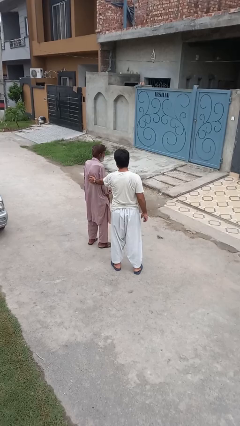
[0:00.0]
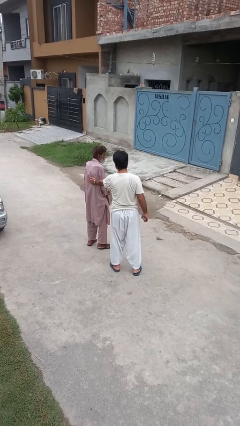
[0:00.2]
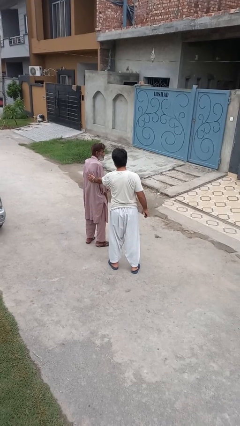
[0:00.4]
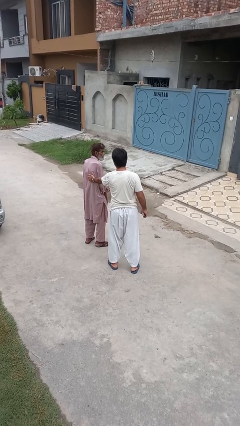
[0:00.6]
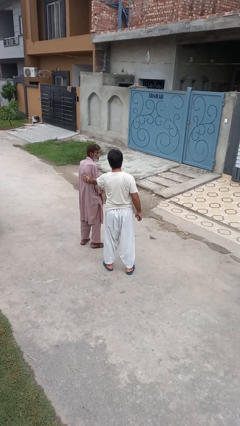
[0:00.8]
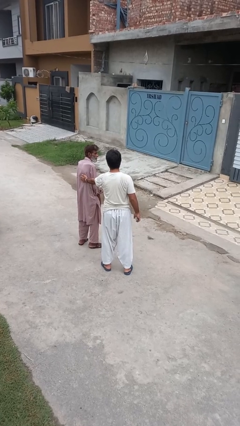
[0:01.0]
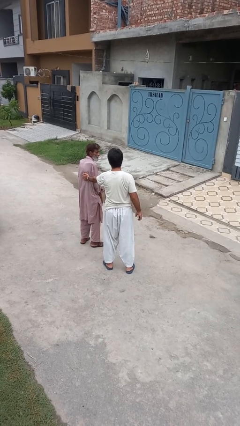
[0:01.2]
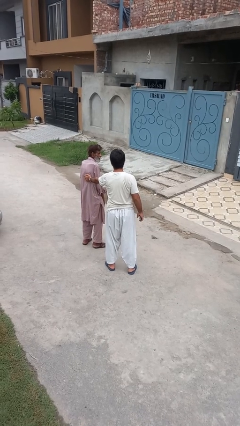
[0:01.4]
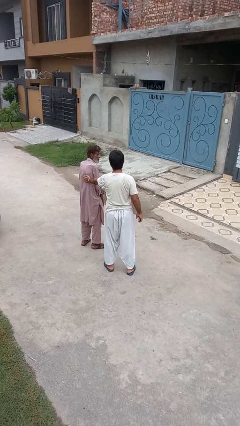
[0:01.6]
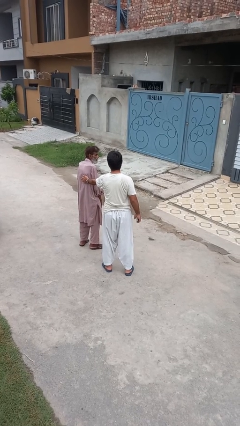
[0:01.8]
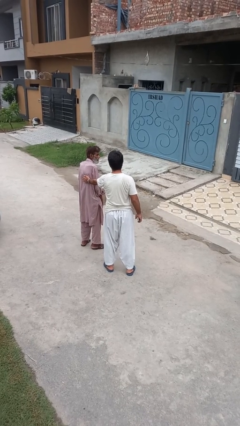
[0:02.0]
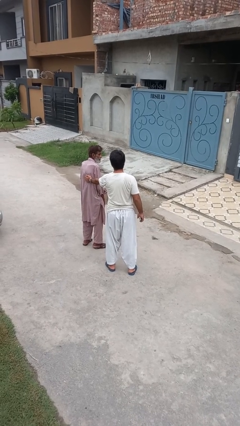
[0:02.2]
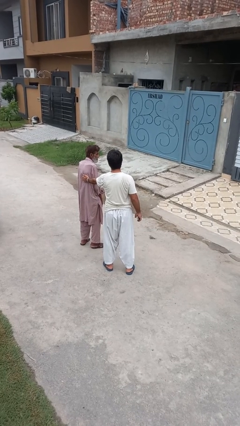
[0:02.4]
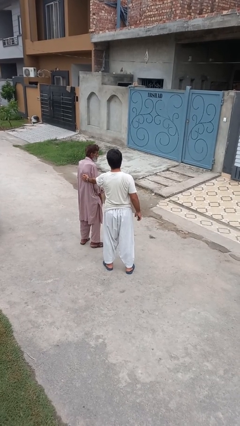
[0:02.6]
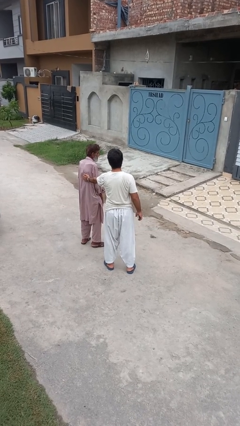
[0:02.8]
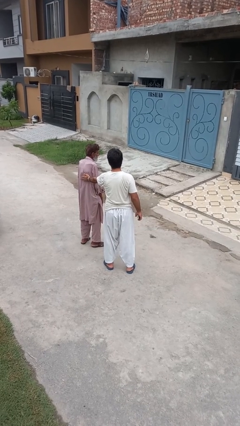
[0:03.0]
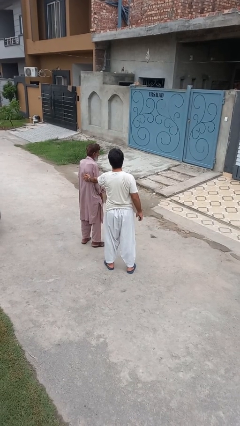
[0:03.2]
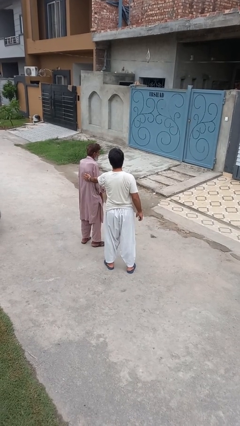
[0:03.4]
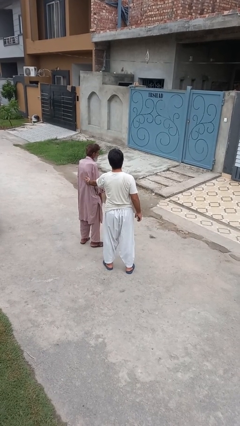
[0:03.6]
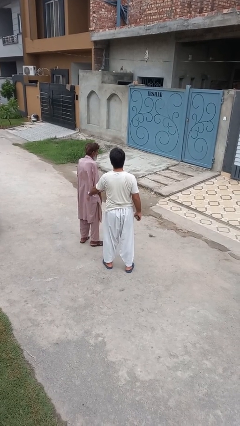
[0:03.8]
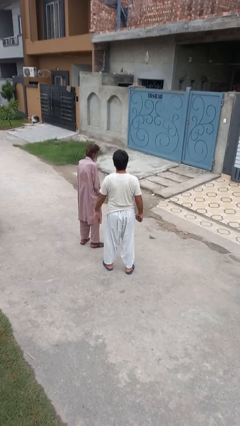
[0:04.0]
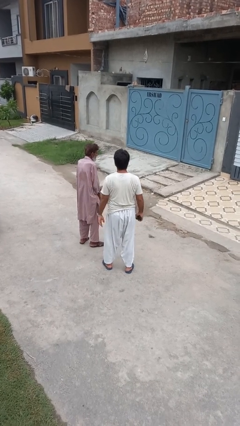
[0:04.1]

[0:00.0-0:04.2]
person touches back of person

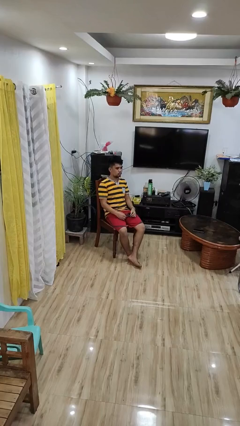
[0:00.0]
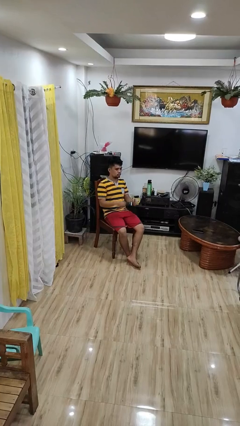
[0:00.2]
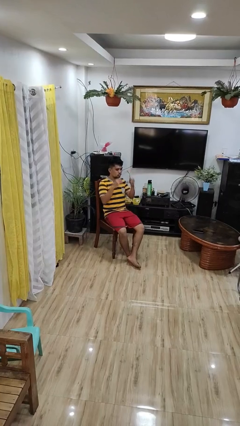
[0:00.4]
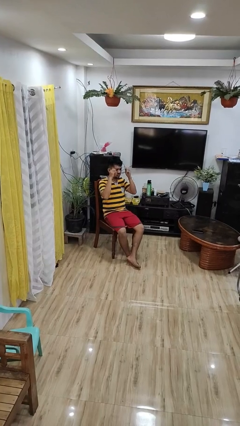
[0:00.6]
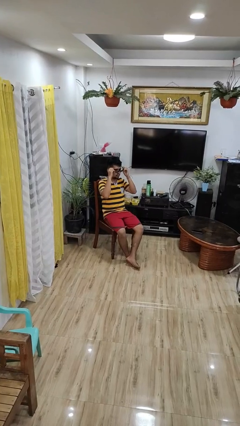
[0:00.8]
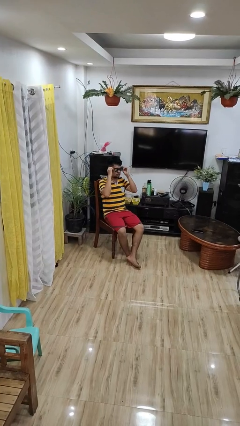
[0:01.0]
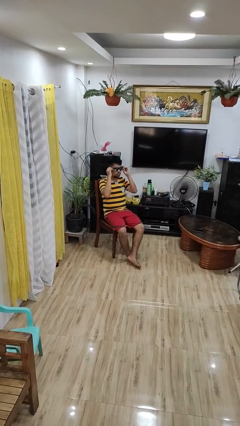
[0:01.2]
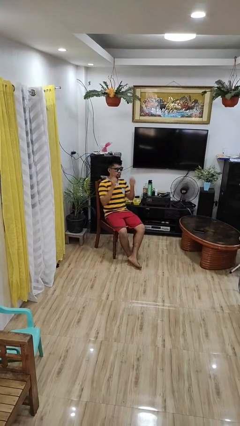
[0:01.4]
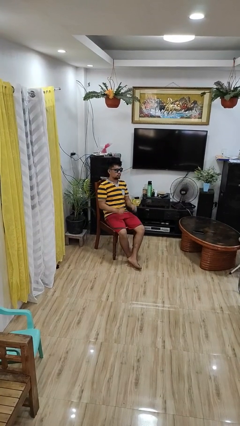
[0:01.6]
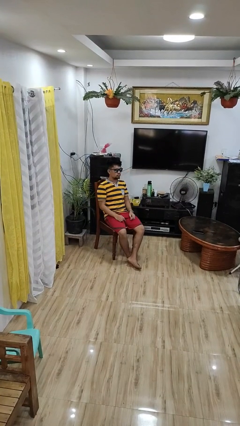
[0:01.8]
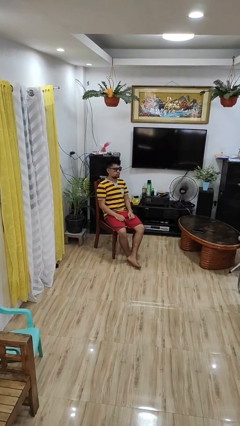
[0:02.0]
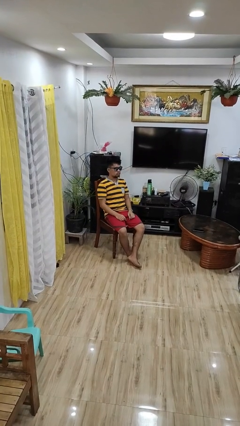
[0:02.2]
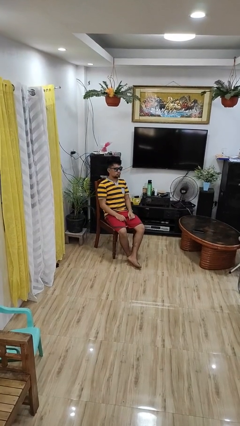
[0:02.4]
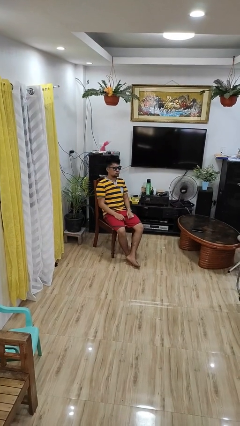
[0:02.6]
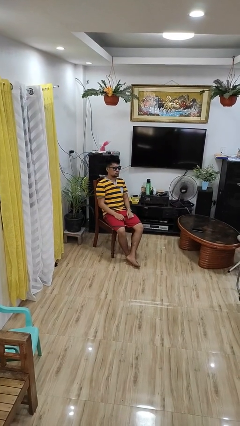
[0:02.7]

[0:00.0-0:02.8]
person puts on sunglasses

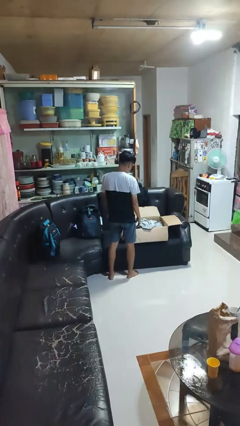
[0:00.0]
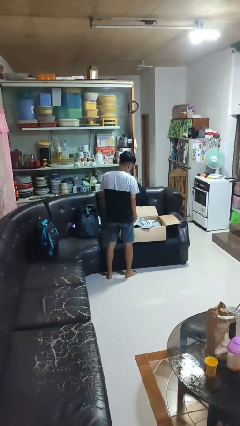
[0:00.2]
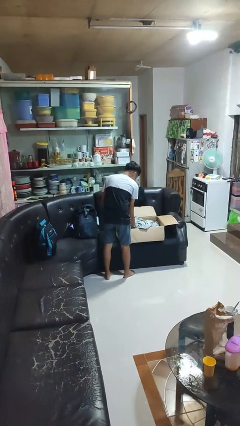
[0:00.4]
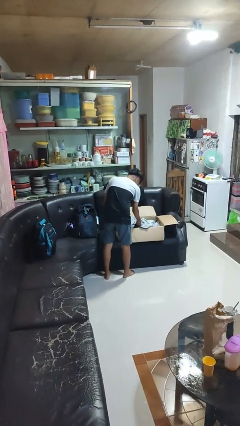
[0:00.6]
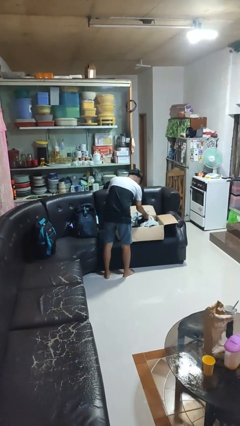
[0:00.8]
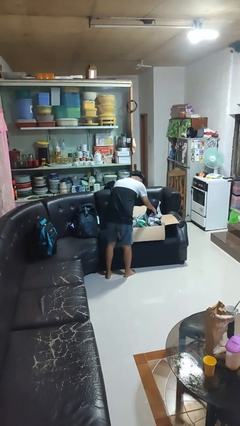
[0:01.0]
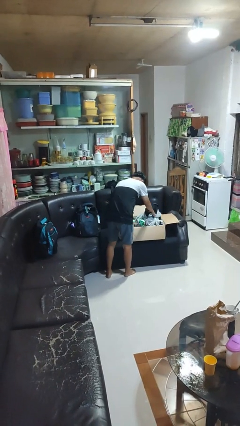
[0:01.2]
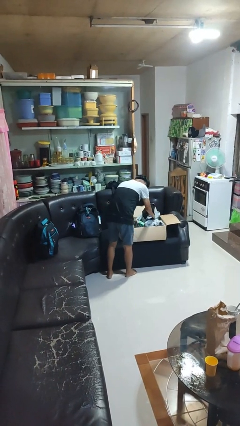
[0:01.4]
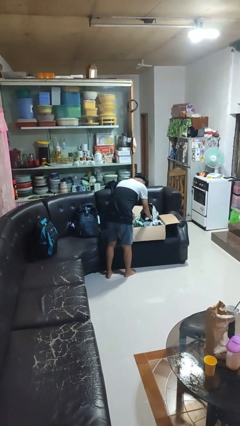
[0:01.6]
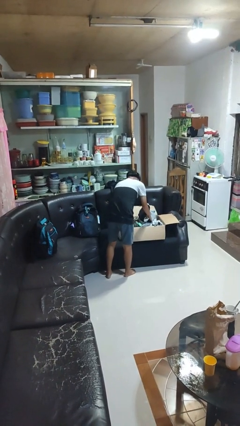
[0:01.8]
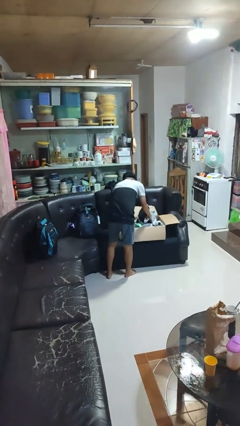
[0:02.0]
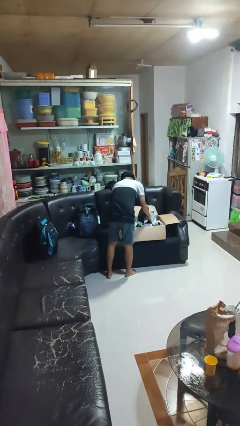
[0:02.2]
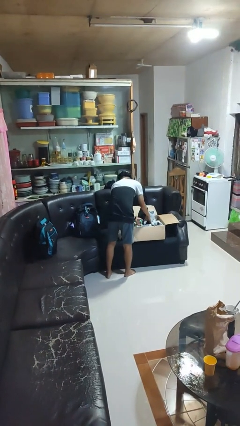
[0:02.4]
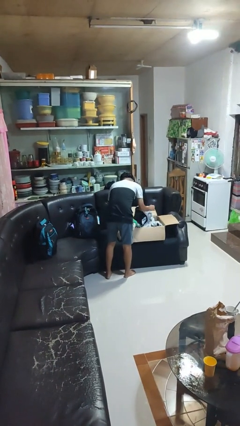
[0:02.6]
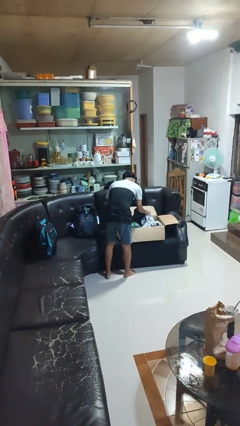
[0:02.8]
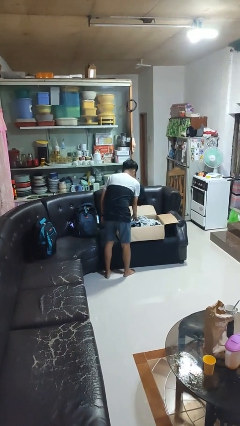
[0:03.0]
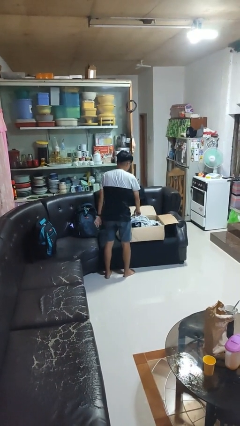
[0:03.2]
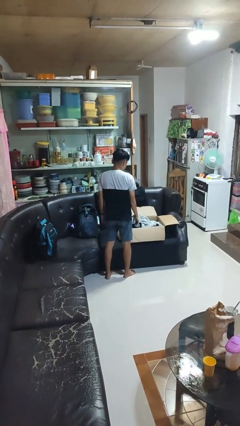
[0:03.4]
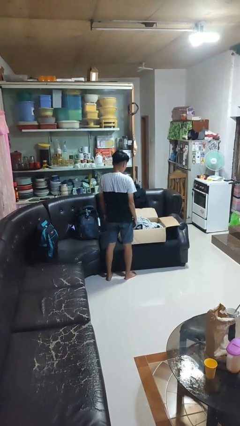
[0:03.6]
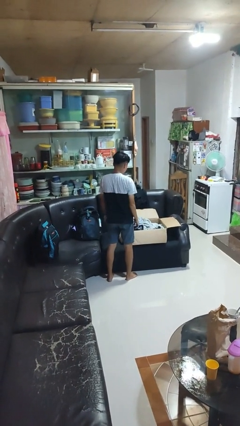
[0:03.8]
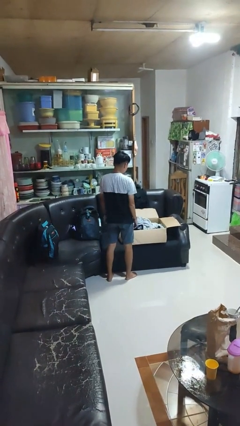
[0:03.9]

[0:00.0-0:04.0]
person searches in box

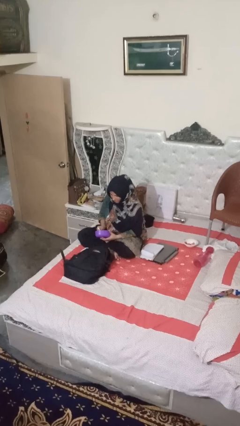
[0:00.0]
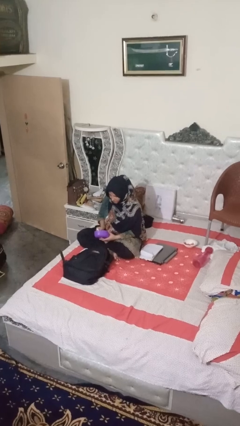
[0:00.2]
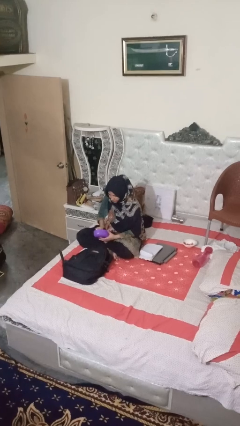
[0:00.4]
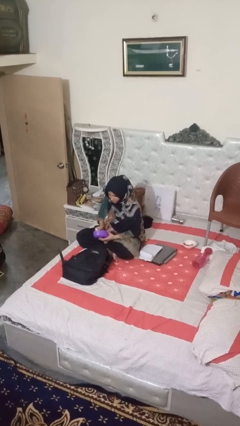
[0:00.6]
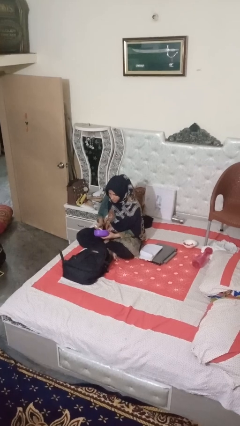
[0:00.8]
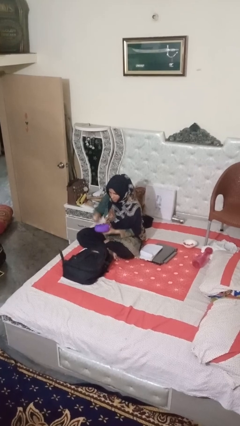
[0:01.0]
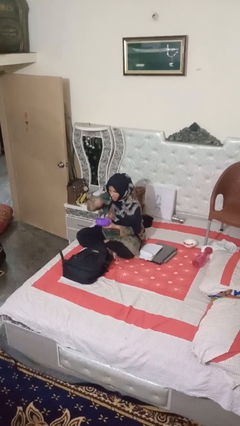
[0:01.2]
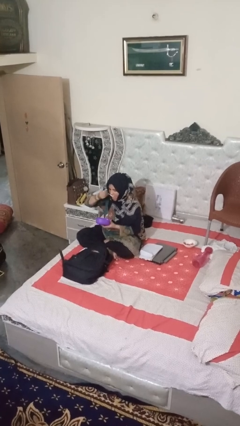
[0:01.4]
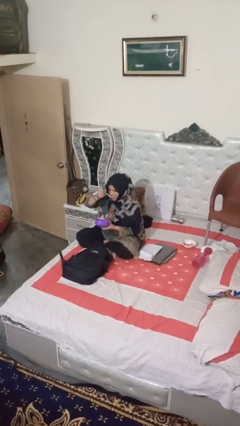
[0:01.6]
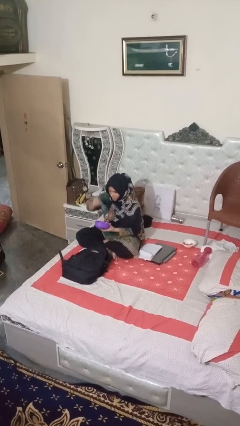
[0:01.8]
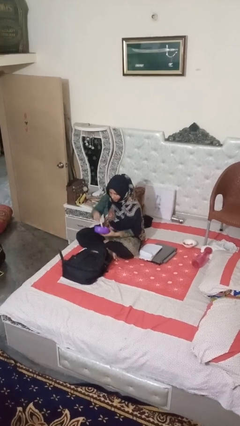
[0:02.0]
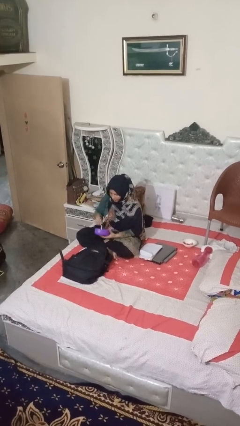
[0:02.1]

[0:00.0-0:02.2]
person eats snack from bag

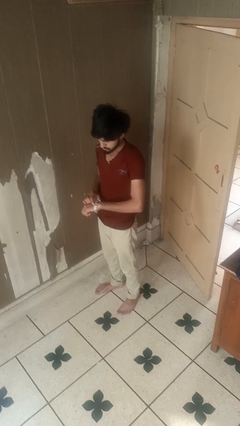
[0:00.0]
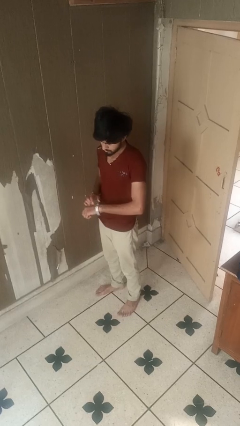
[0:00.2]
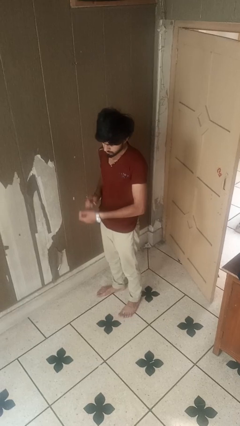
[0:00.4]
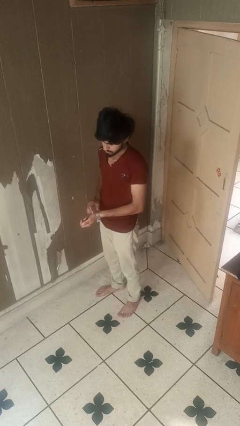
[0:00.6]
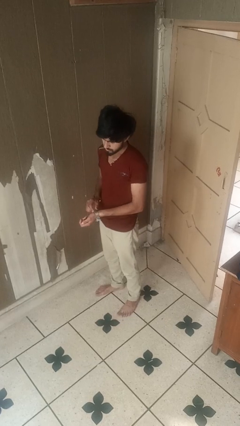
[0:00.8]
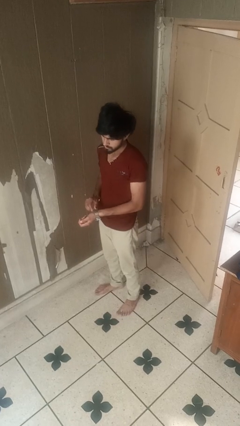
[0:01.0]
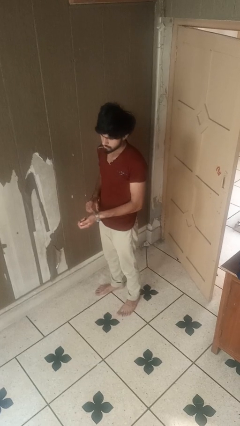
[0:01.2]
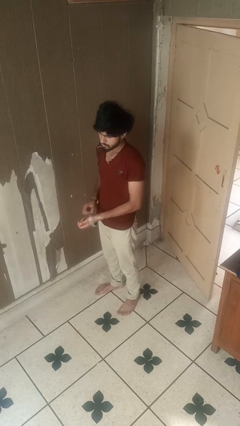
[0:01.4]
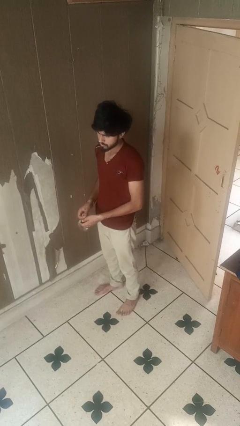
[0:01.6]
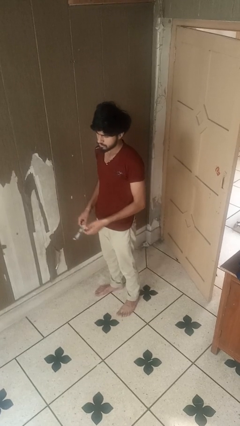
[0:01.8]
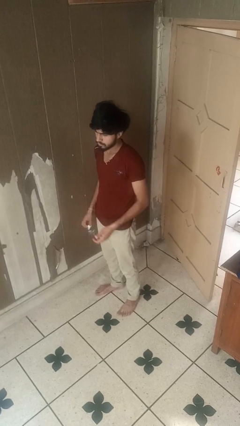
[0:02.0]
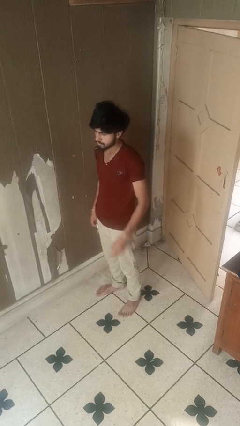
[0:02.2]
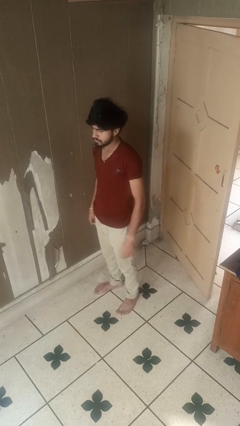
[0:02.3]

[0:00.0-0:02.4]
person takes off wristwatch

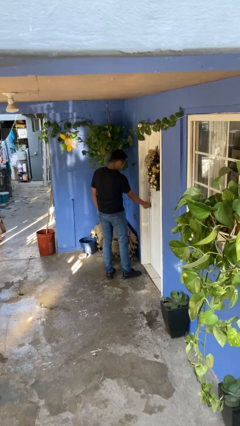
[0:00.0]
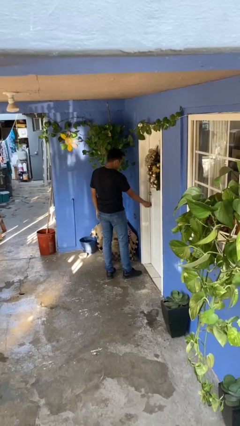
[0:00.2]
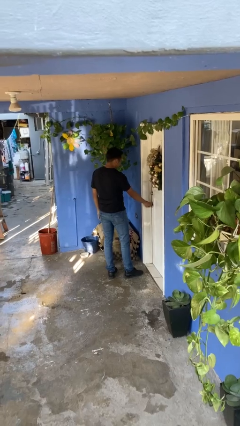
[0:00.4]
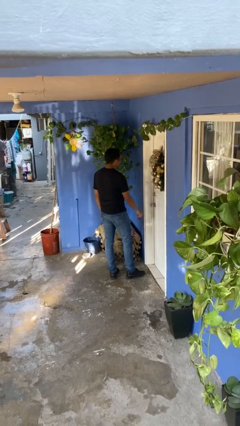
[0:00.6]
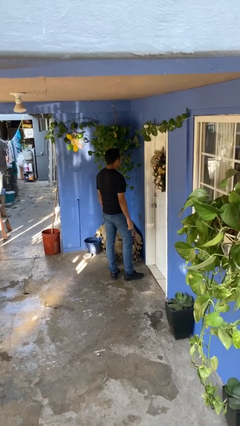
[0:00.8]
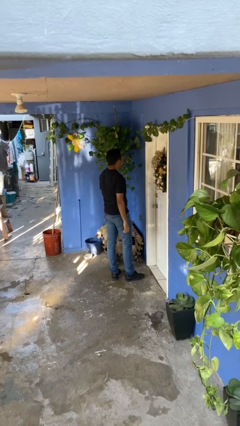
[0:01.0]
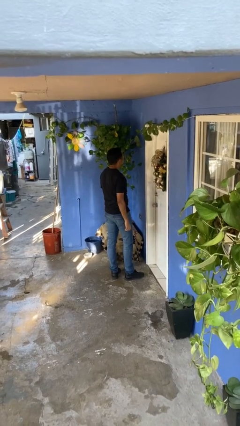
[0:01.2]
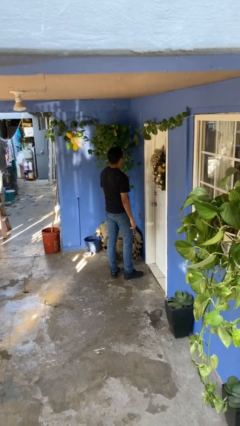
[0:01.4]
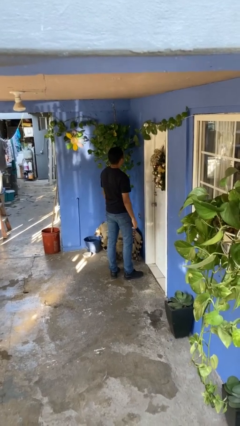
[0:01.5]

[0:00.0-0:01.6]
person closes facility door
